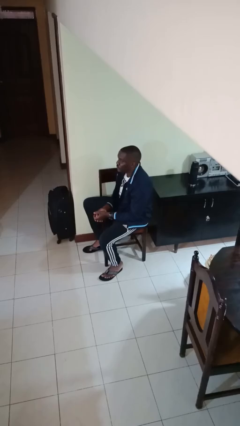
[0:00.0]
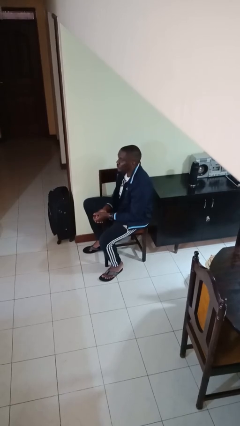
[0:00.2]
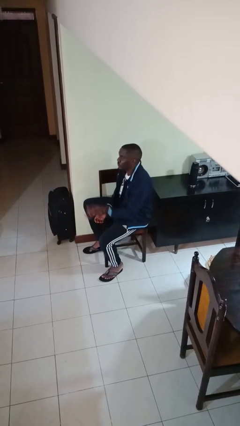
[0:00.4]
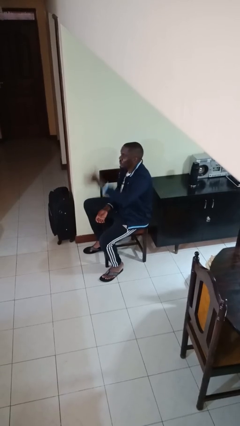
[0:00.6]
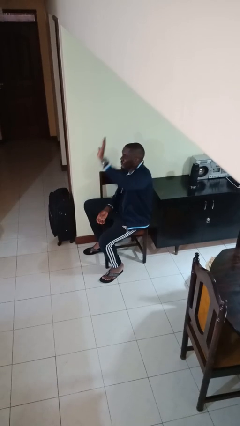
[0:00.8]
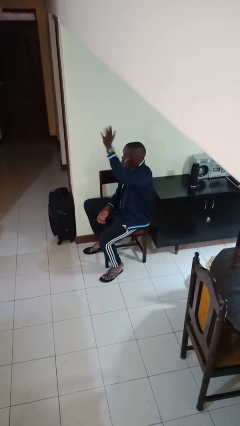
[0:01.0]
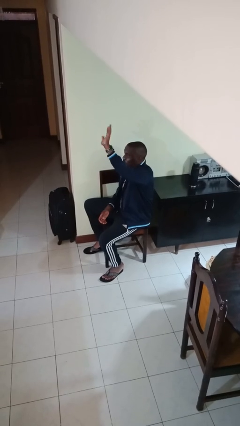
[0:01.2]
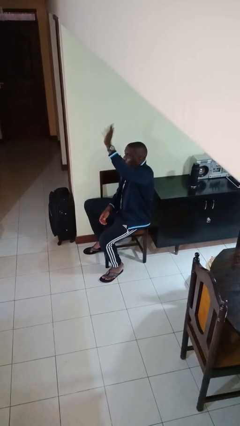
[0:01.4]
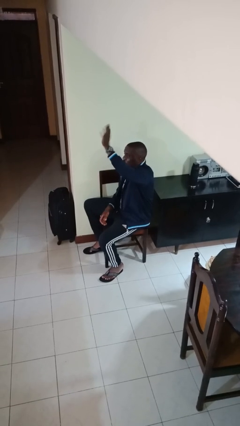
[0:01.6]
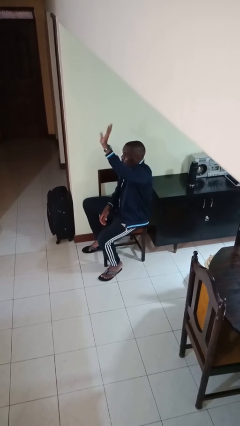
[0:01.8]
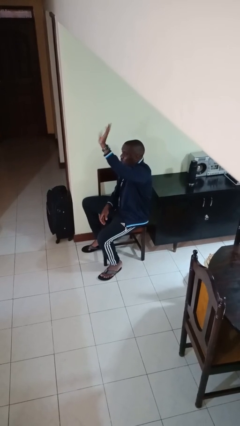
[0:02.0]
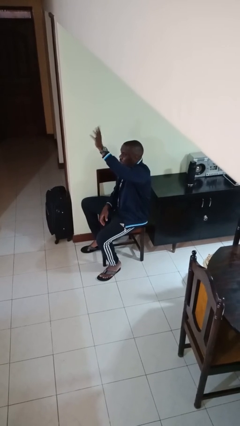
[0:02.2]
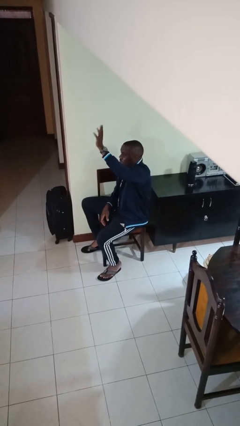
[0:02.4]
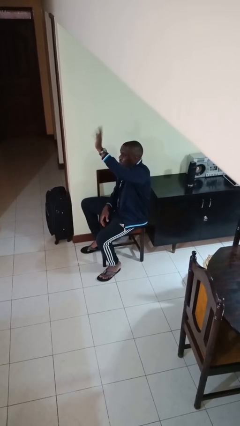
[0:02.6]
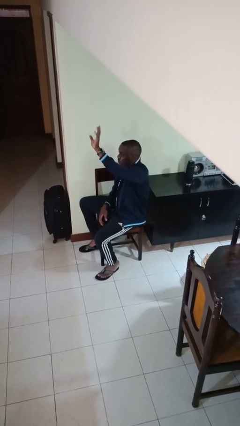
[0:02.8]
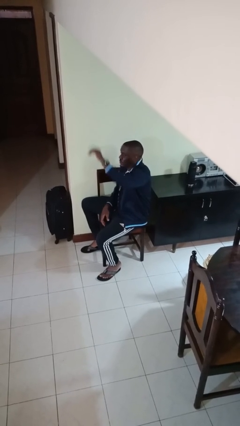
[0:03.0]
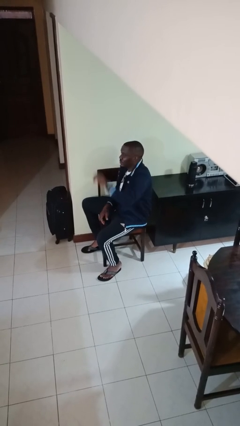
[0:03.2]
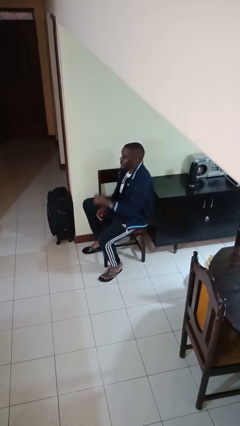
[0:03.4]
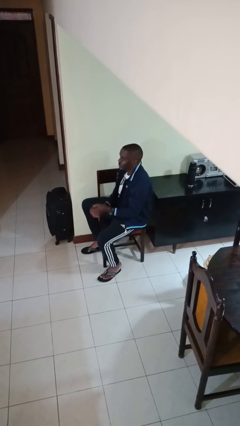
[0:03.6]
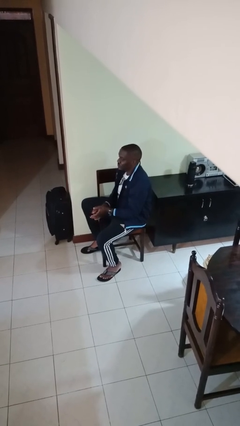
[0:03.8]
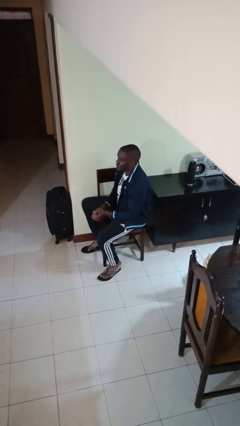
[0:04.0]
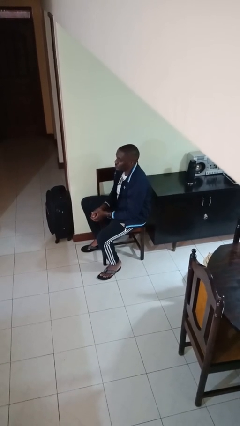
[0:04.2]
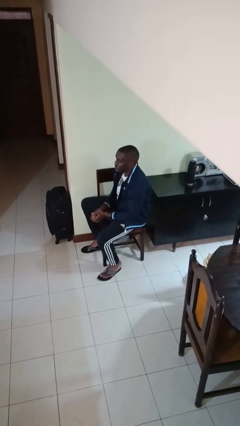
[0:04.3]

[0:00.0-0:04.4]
person waves at person

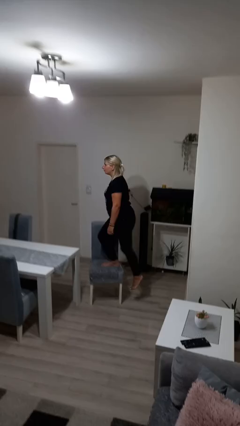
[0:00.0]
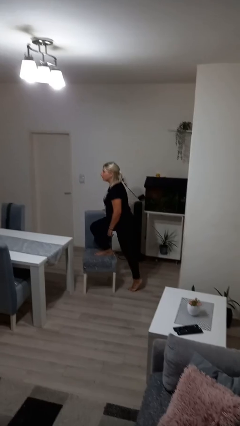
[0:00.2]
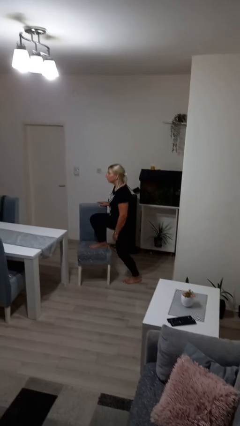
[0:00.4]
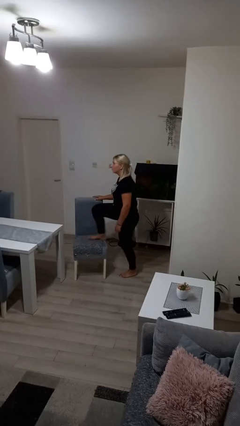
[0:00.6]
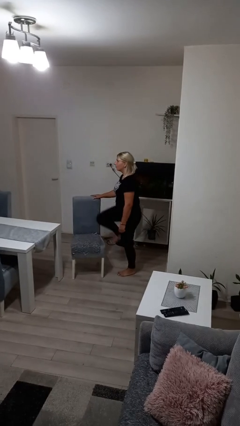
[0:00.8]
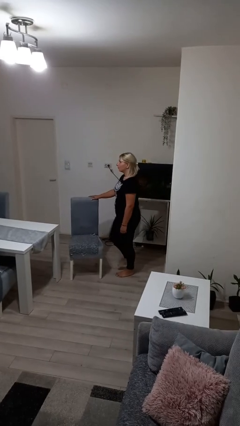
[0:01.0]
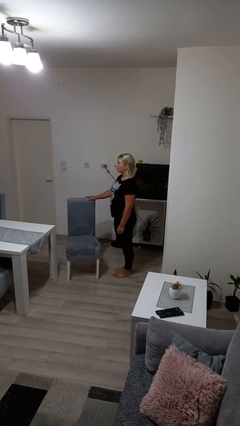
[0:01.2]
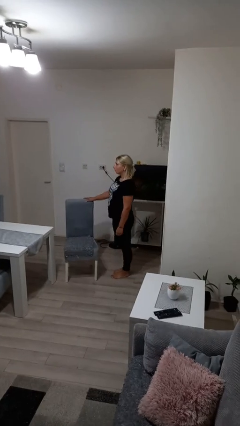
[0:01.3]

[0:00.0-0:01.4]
person climbs off chair

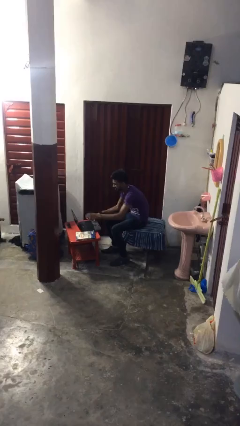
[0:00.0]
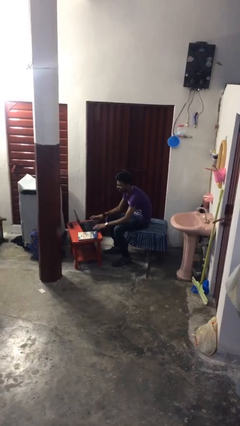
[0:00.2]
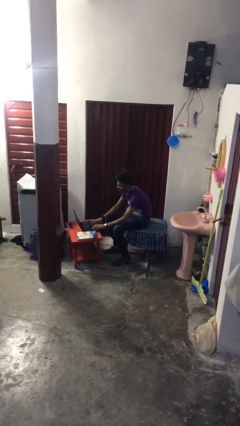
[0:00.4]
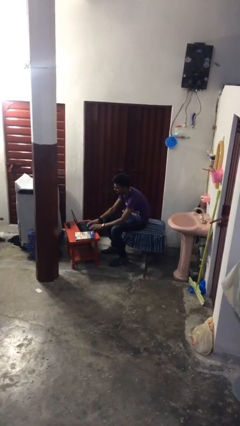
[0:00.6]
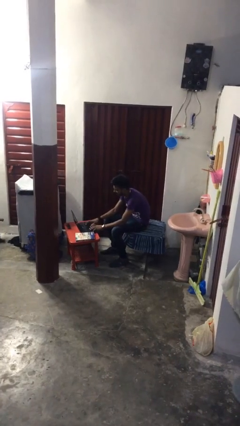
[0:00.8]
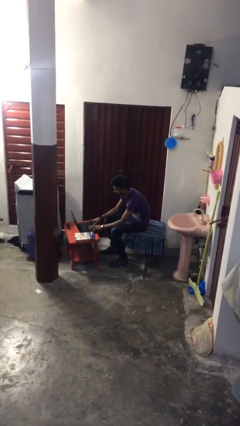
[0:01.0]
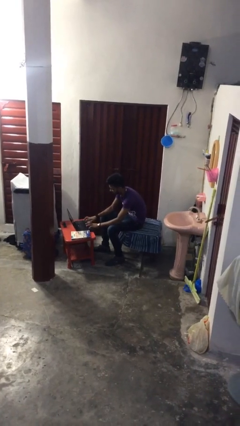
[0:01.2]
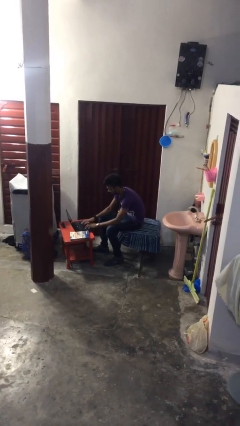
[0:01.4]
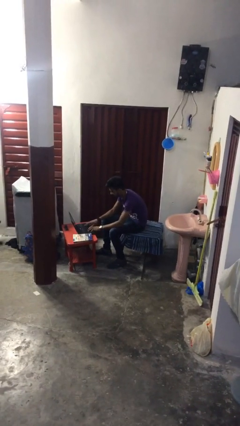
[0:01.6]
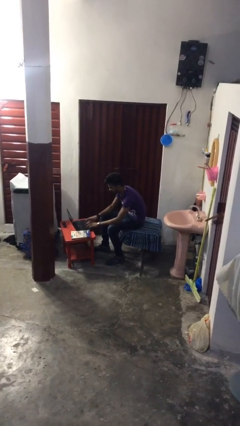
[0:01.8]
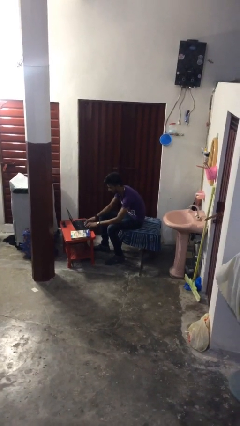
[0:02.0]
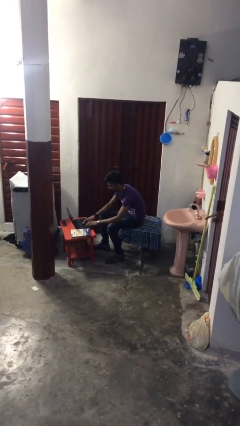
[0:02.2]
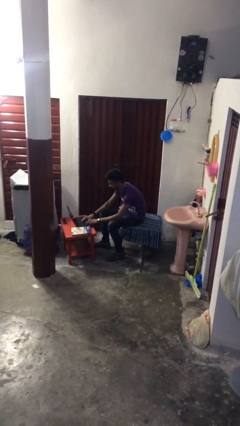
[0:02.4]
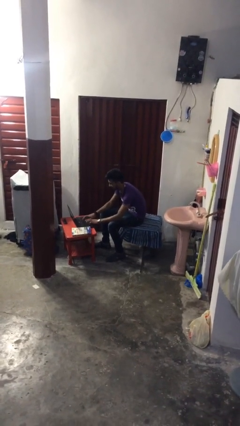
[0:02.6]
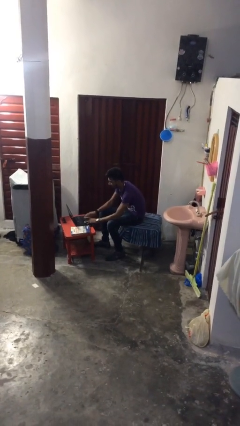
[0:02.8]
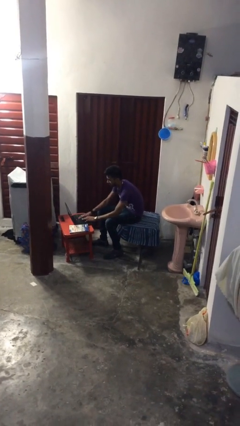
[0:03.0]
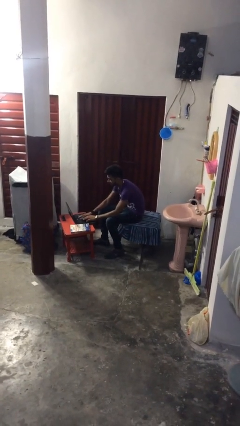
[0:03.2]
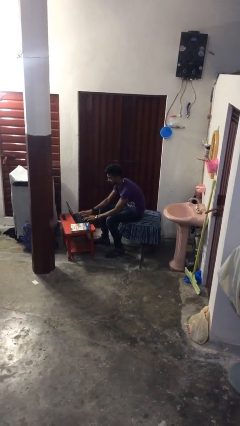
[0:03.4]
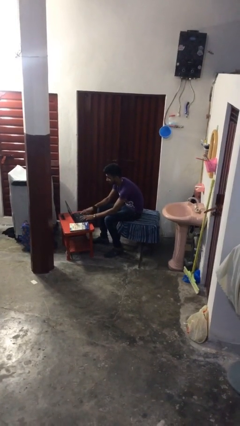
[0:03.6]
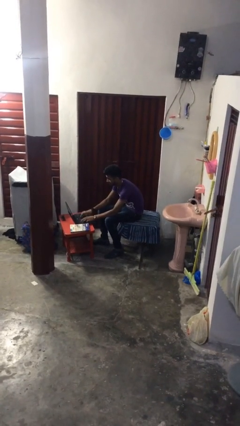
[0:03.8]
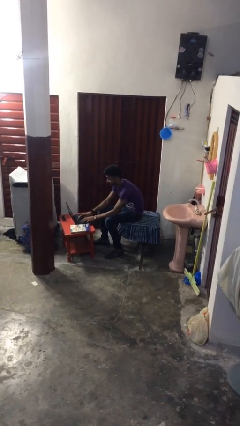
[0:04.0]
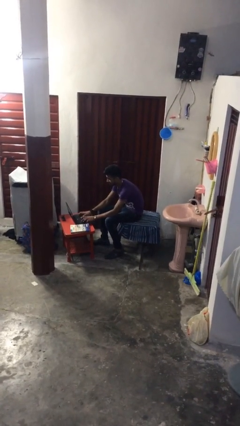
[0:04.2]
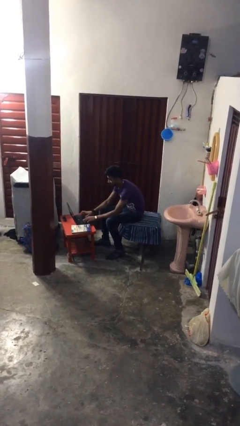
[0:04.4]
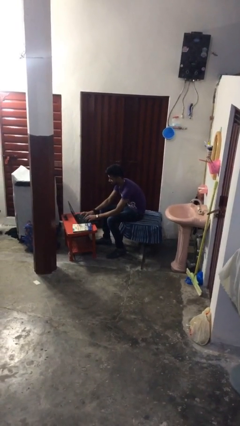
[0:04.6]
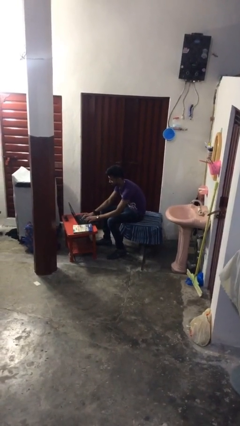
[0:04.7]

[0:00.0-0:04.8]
person interacts with laptop

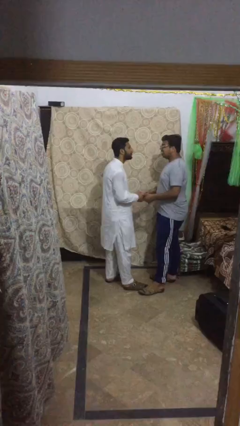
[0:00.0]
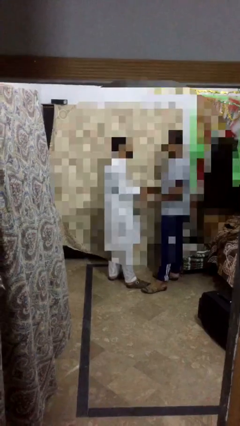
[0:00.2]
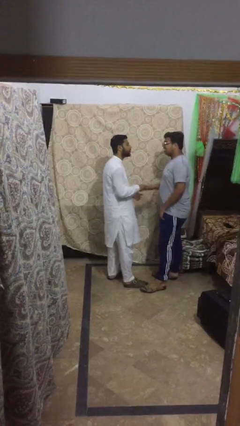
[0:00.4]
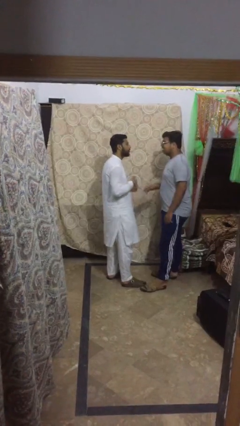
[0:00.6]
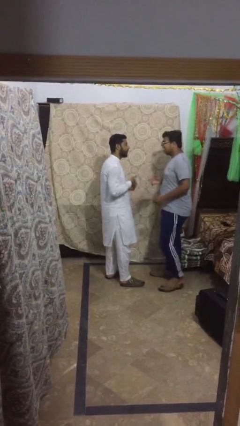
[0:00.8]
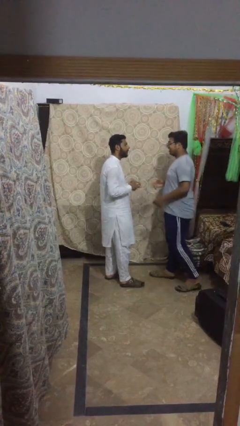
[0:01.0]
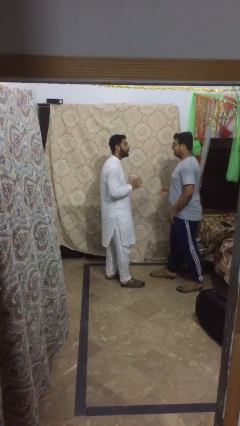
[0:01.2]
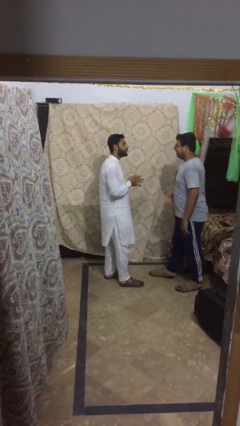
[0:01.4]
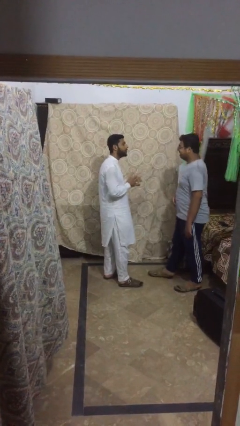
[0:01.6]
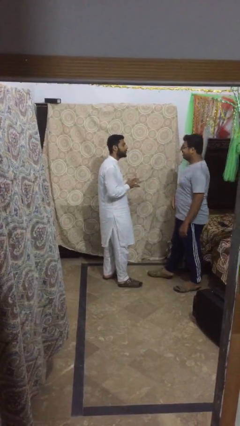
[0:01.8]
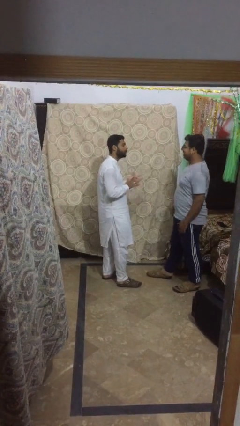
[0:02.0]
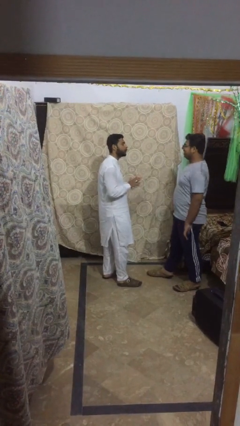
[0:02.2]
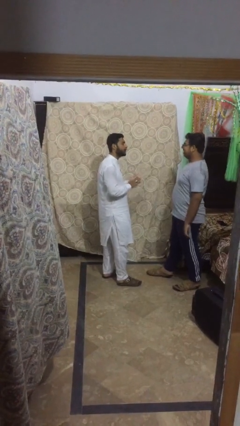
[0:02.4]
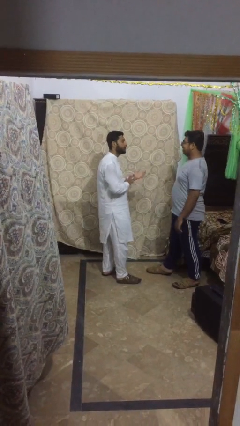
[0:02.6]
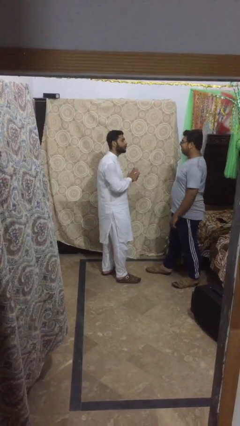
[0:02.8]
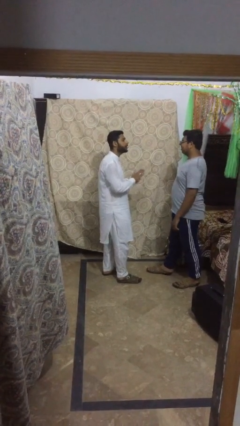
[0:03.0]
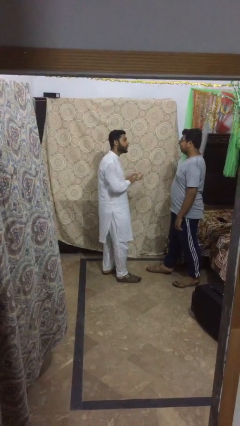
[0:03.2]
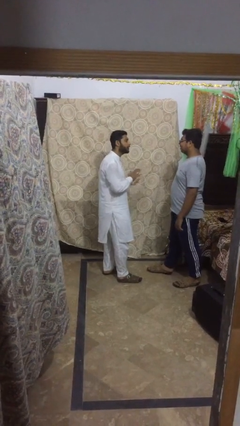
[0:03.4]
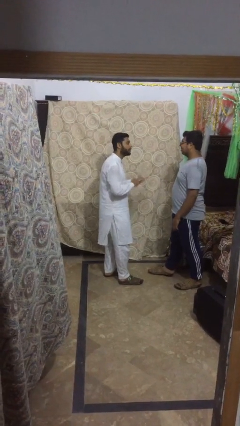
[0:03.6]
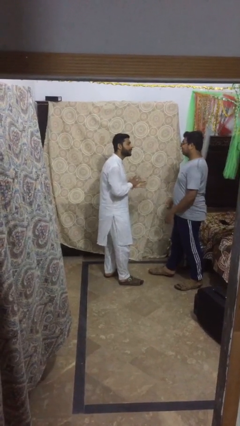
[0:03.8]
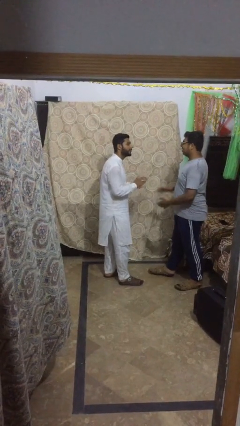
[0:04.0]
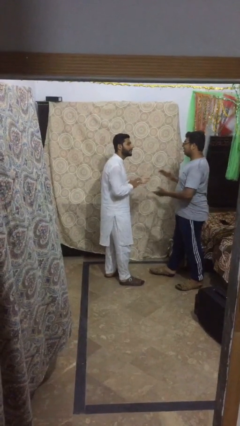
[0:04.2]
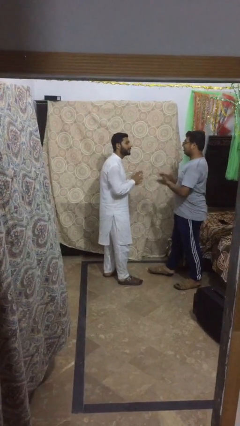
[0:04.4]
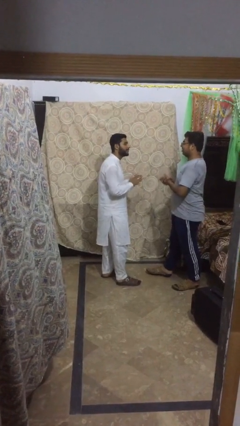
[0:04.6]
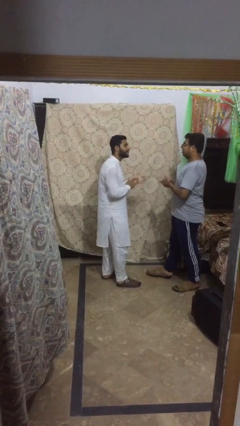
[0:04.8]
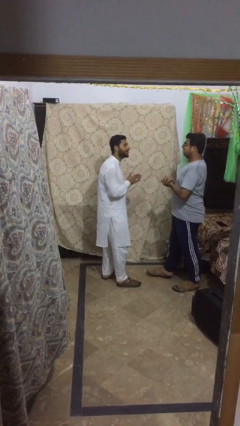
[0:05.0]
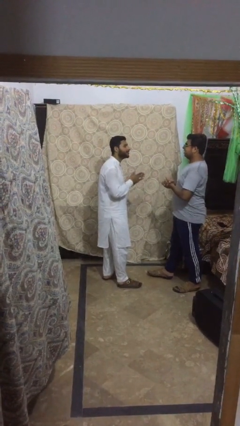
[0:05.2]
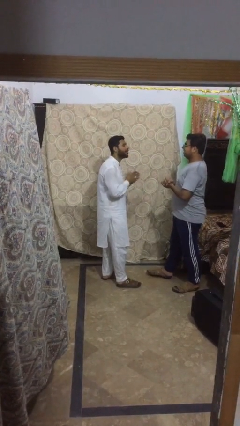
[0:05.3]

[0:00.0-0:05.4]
person talks to person

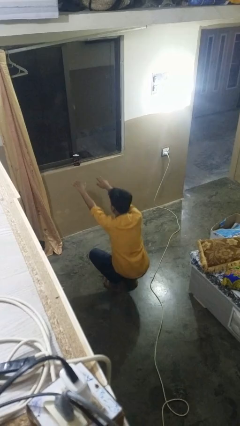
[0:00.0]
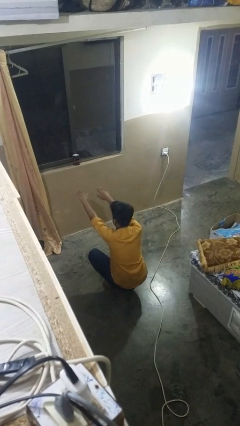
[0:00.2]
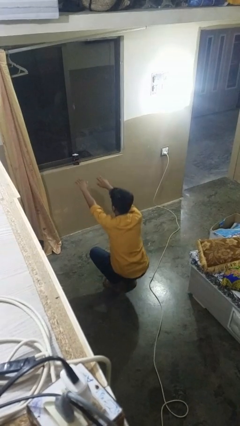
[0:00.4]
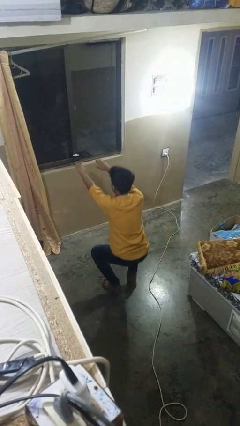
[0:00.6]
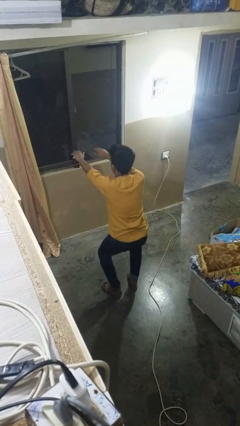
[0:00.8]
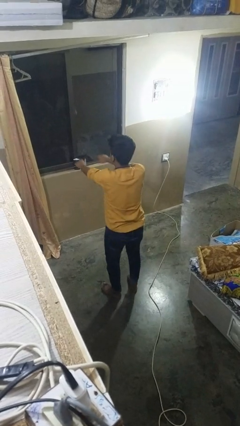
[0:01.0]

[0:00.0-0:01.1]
person stands up

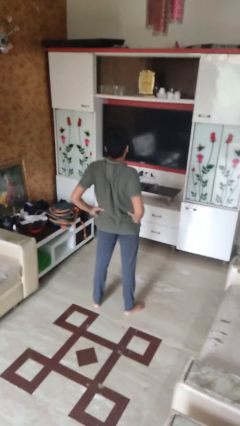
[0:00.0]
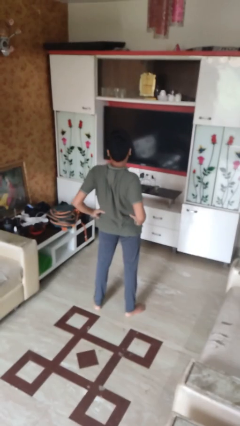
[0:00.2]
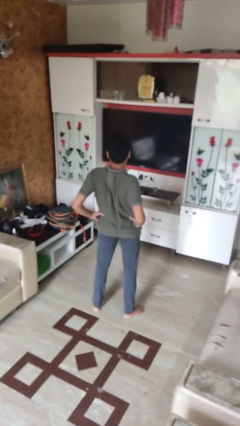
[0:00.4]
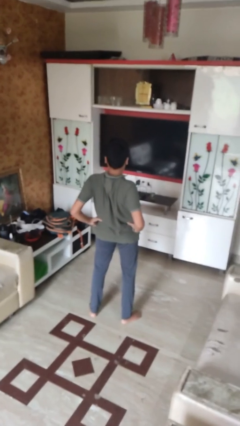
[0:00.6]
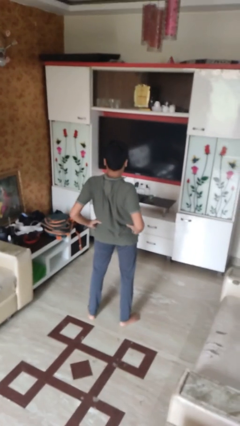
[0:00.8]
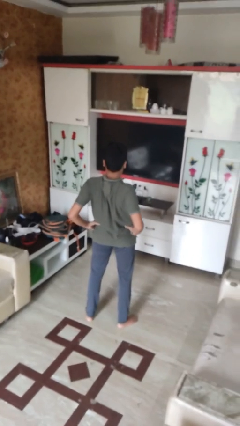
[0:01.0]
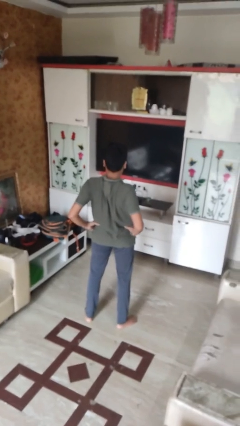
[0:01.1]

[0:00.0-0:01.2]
person stretches back
